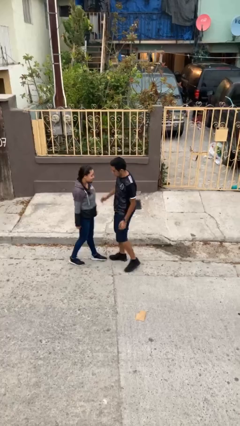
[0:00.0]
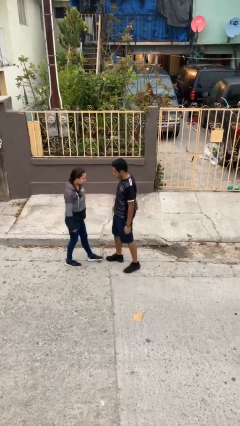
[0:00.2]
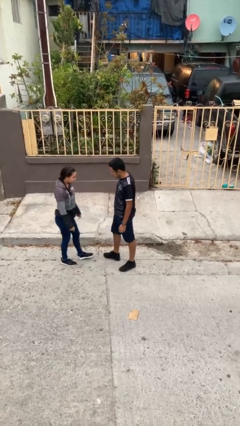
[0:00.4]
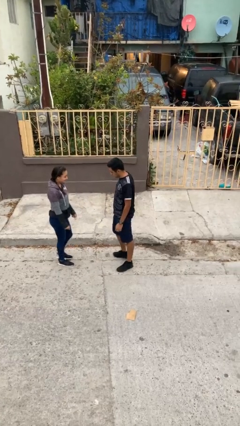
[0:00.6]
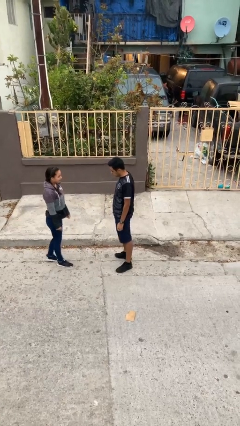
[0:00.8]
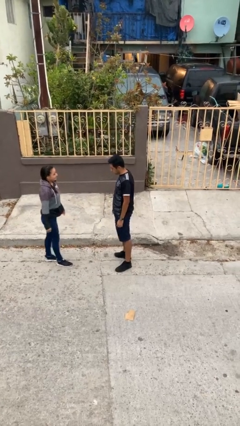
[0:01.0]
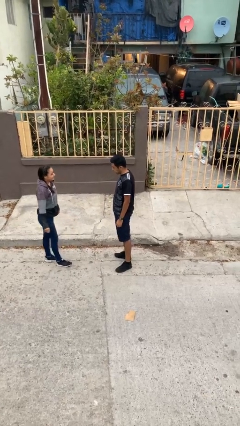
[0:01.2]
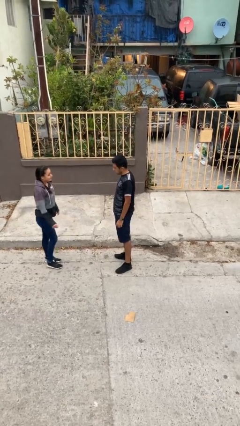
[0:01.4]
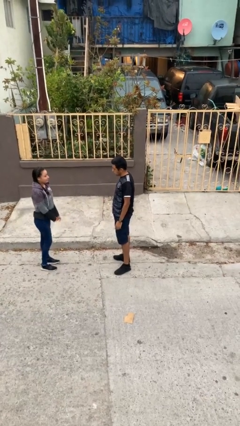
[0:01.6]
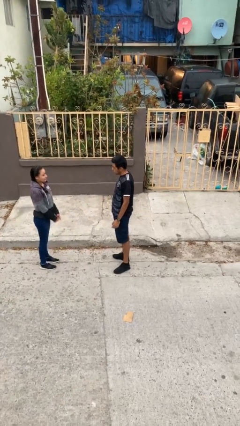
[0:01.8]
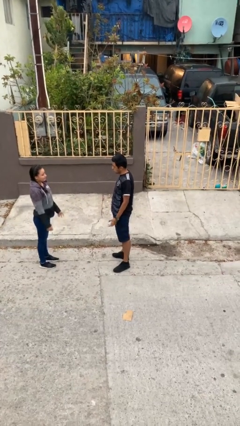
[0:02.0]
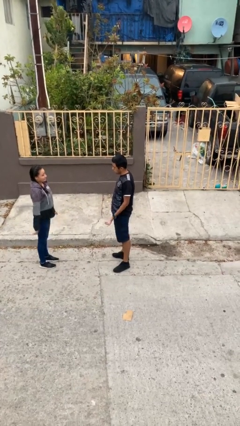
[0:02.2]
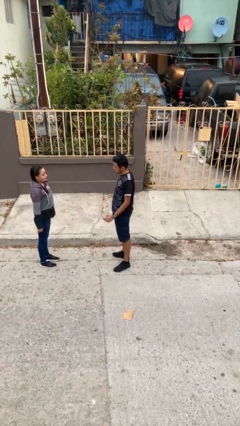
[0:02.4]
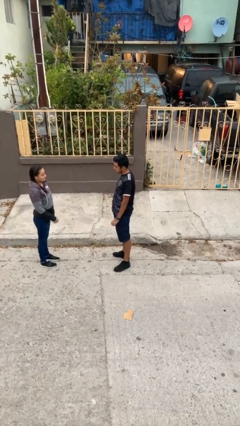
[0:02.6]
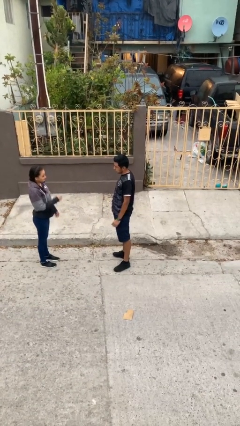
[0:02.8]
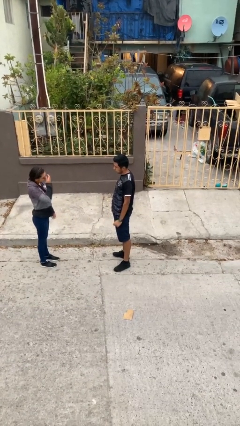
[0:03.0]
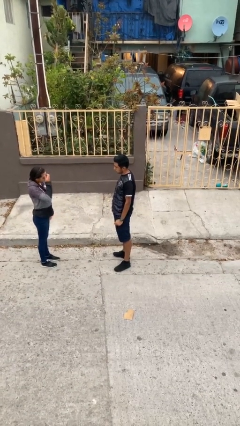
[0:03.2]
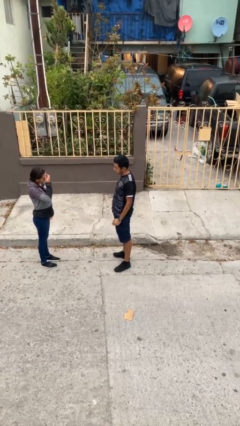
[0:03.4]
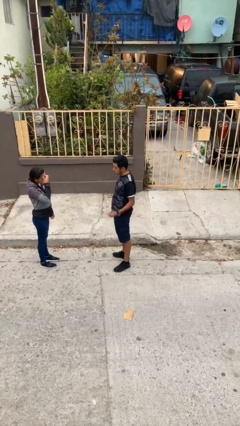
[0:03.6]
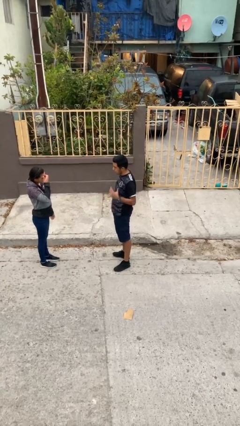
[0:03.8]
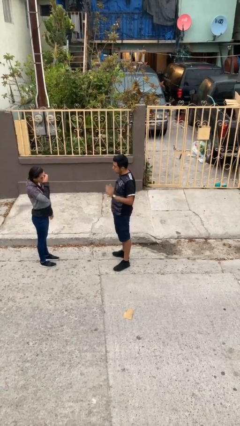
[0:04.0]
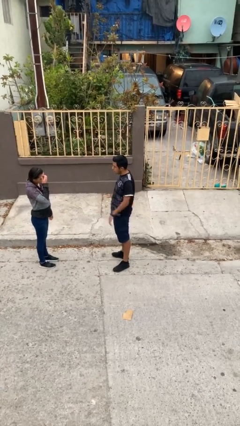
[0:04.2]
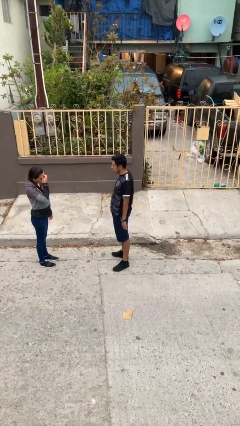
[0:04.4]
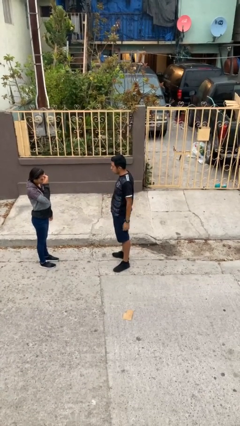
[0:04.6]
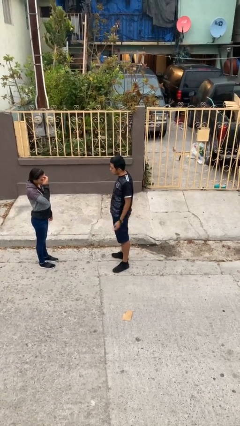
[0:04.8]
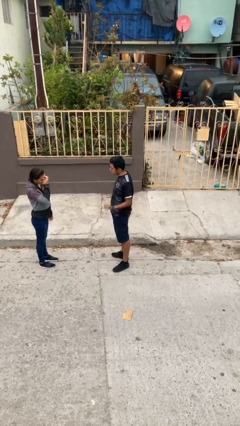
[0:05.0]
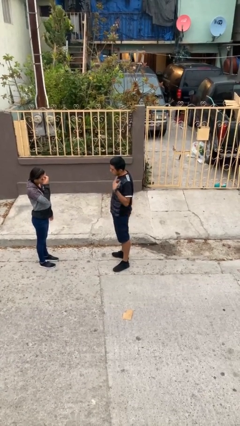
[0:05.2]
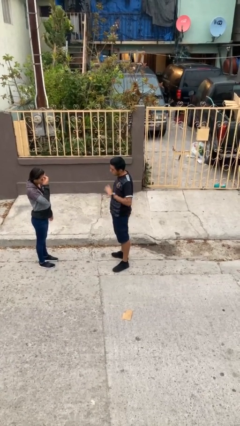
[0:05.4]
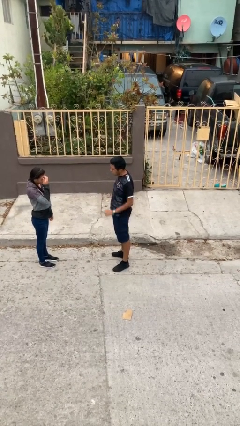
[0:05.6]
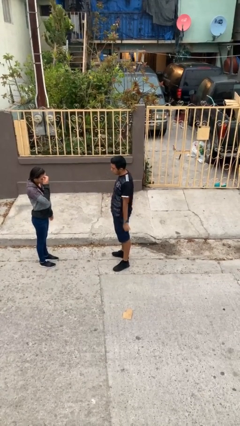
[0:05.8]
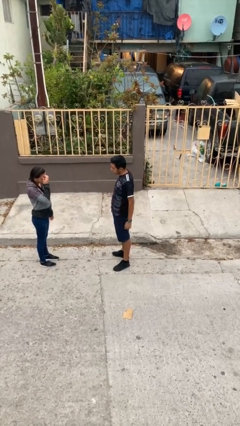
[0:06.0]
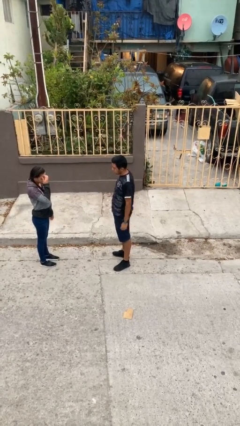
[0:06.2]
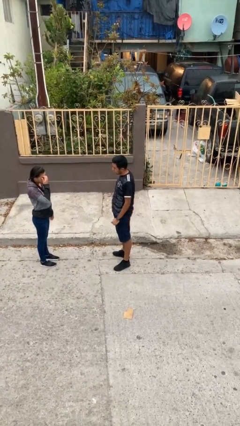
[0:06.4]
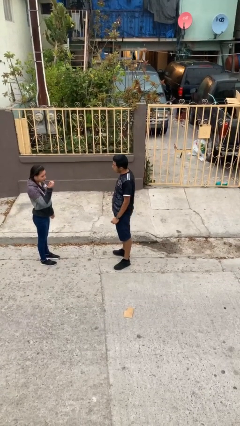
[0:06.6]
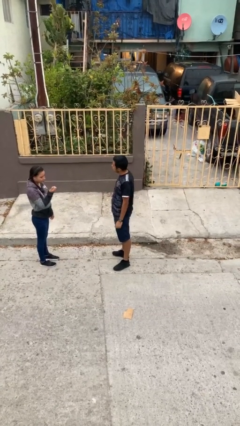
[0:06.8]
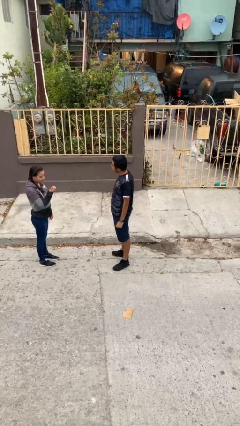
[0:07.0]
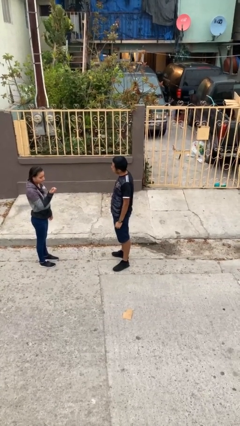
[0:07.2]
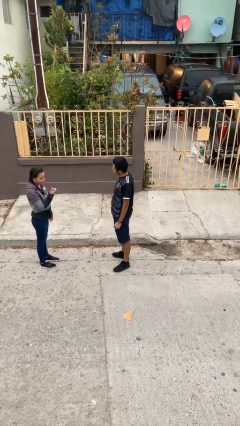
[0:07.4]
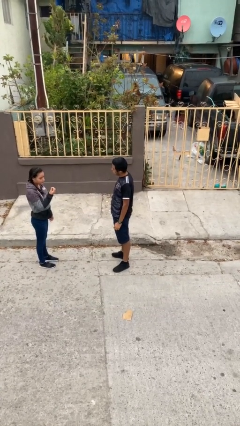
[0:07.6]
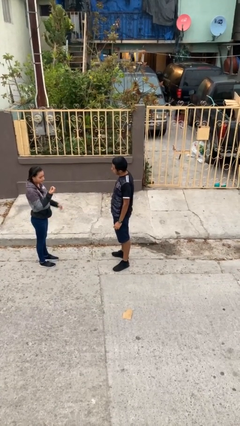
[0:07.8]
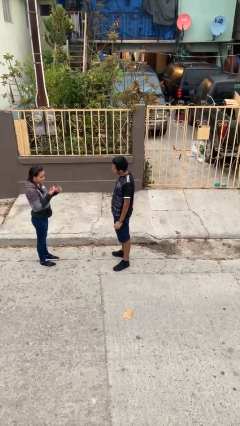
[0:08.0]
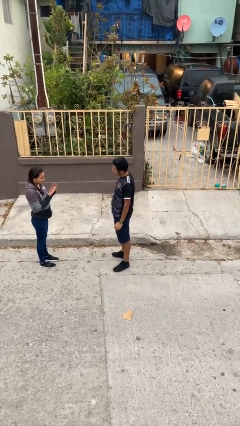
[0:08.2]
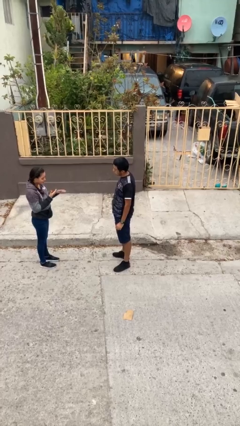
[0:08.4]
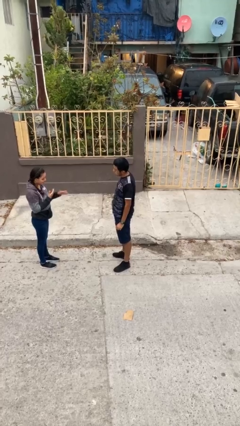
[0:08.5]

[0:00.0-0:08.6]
person talks to person

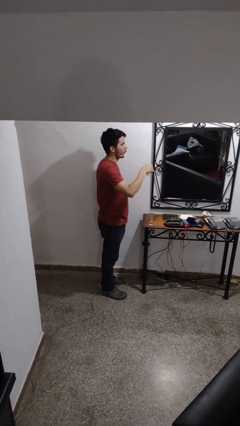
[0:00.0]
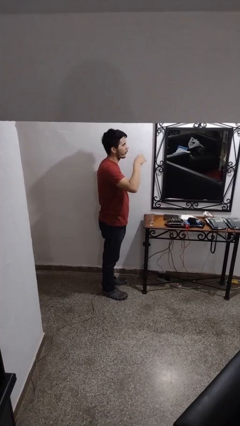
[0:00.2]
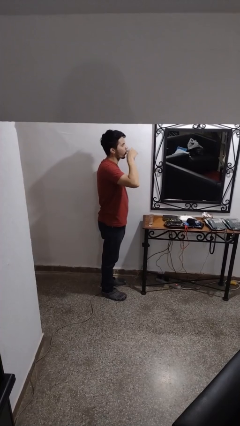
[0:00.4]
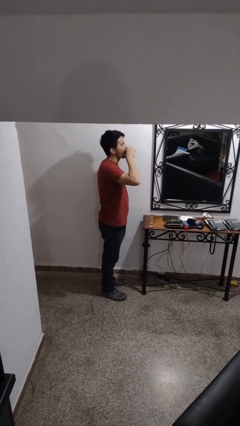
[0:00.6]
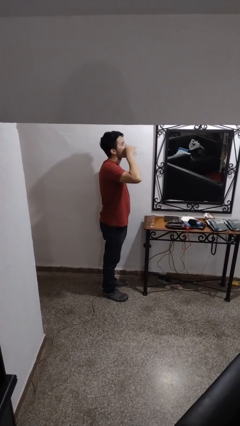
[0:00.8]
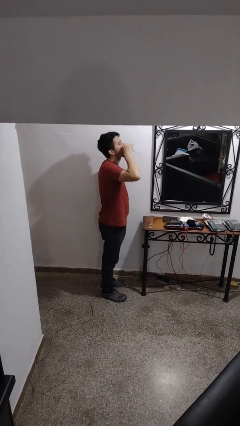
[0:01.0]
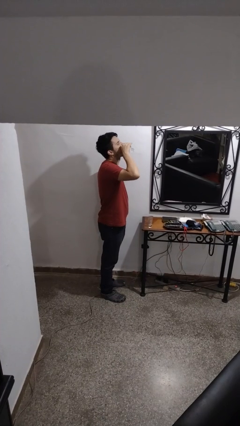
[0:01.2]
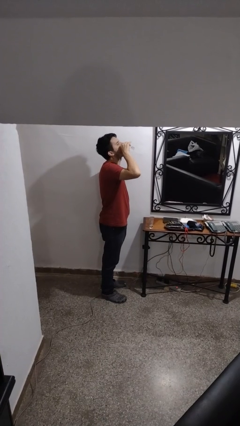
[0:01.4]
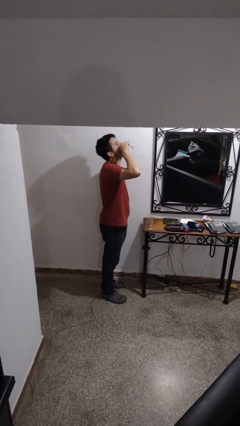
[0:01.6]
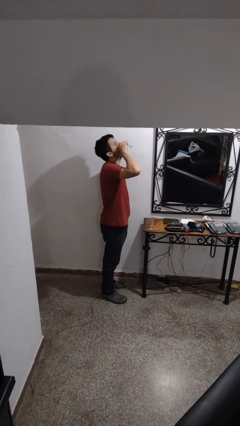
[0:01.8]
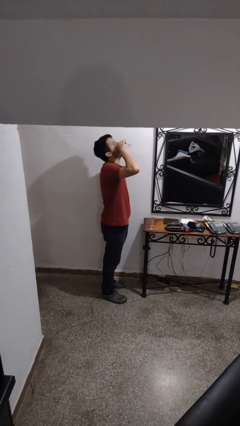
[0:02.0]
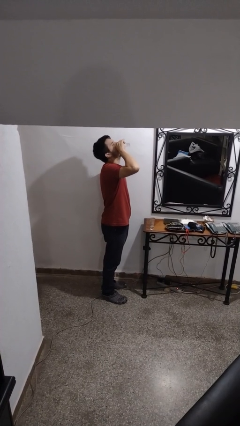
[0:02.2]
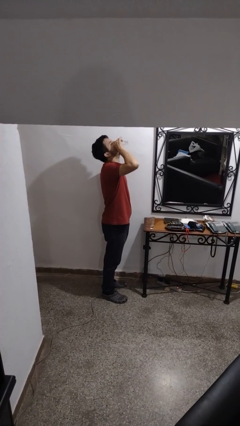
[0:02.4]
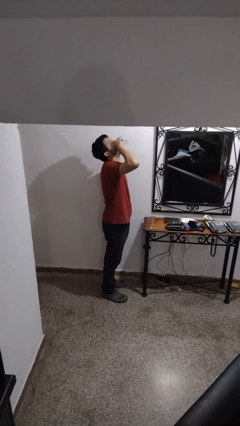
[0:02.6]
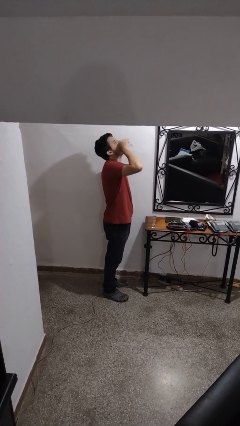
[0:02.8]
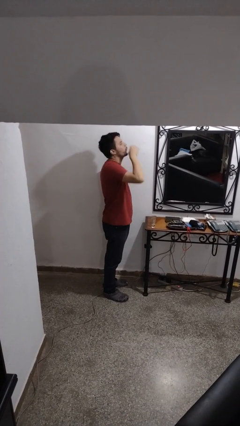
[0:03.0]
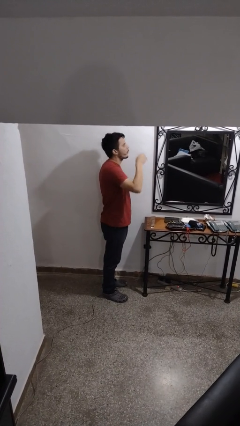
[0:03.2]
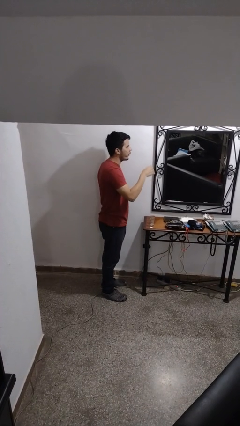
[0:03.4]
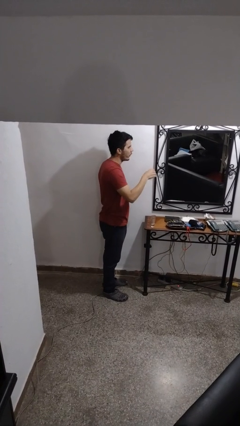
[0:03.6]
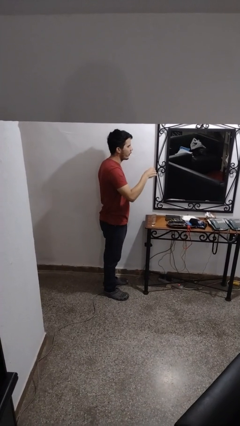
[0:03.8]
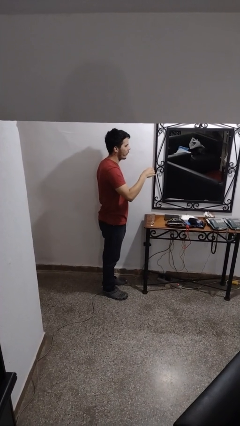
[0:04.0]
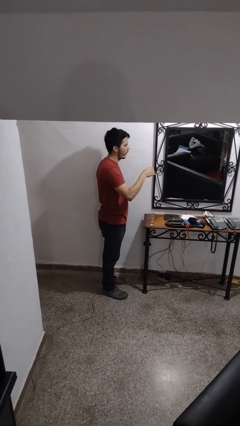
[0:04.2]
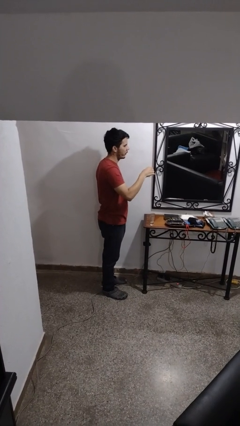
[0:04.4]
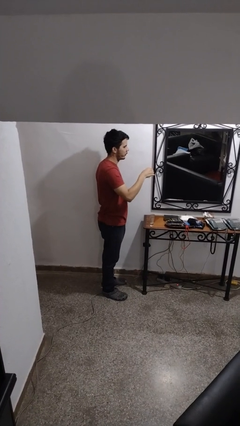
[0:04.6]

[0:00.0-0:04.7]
person drinks from shotglass

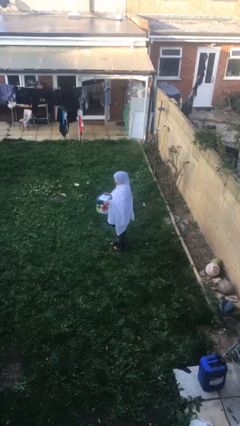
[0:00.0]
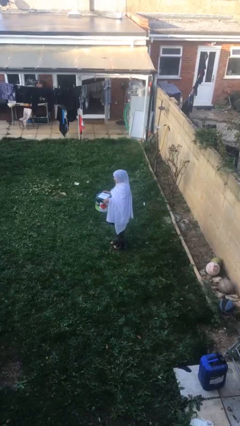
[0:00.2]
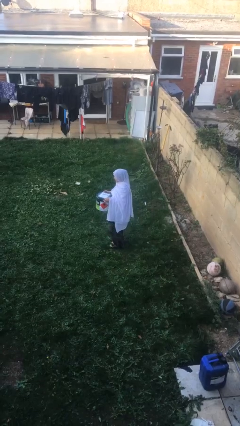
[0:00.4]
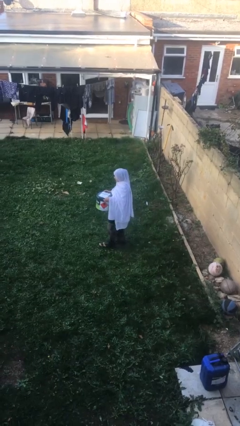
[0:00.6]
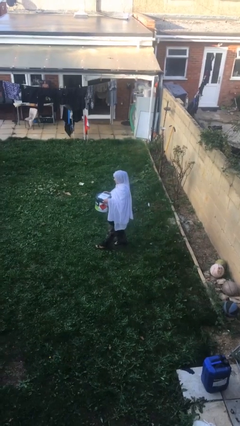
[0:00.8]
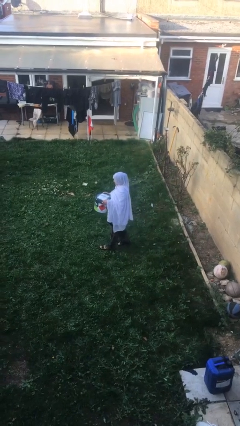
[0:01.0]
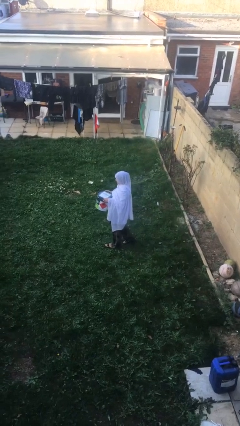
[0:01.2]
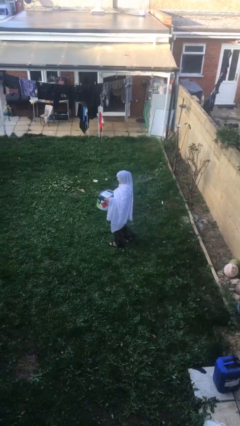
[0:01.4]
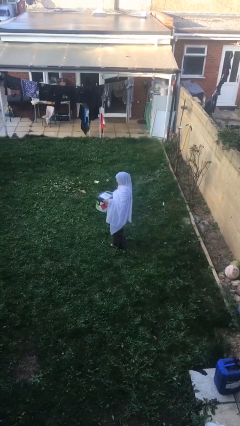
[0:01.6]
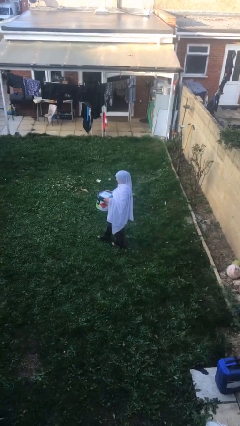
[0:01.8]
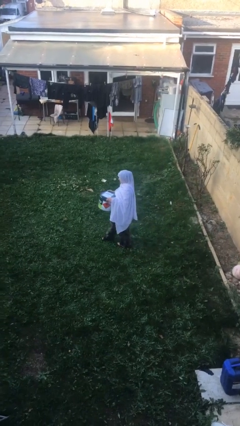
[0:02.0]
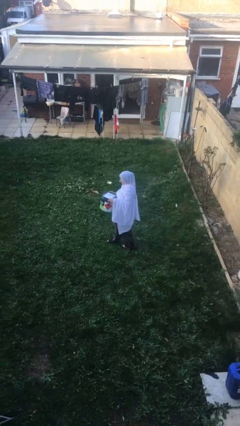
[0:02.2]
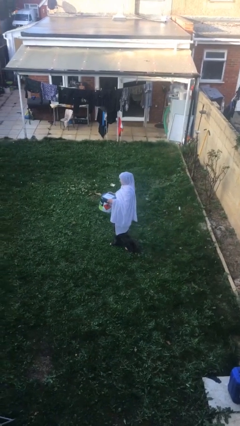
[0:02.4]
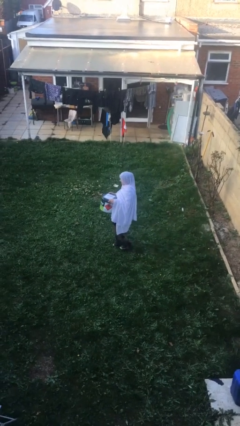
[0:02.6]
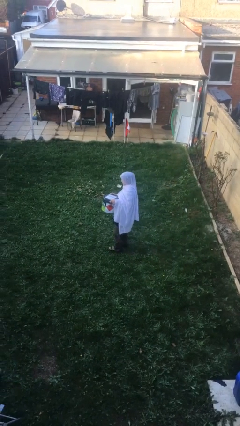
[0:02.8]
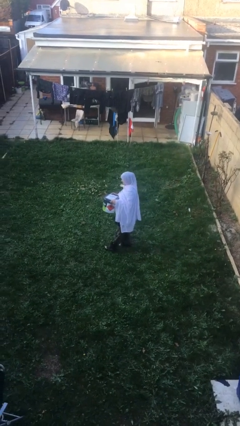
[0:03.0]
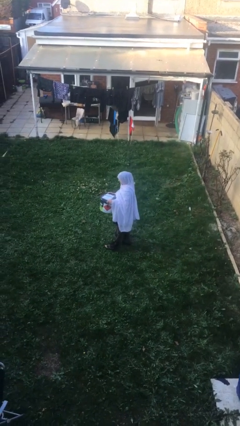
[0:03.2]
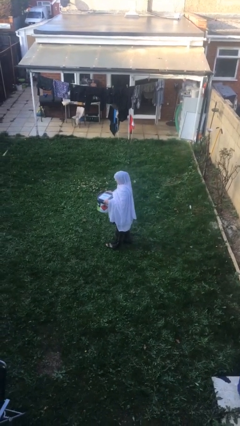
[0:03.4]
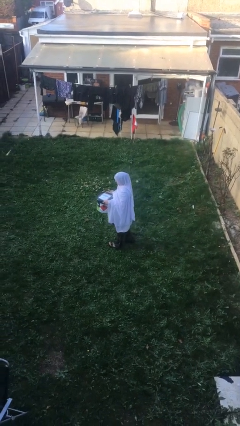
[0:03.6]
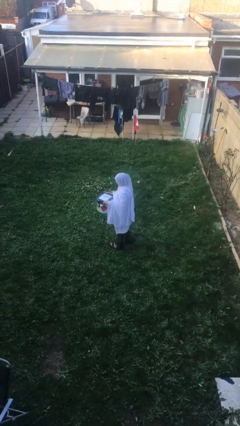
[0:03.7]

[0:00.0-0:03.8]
person carries heavy object

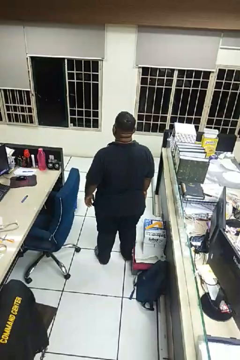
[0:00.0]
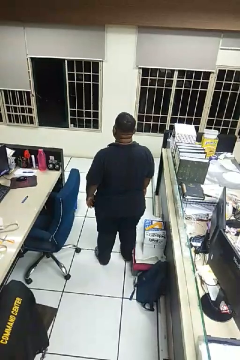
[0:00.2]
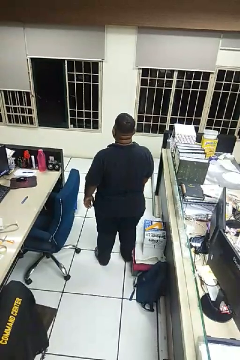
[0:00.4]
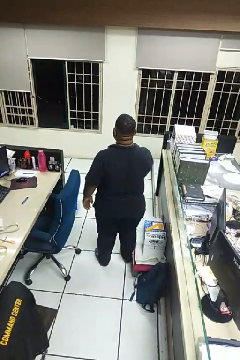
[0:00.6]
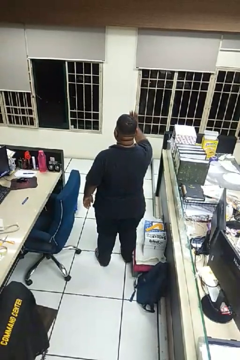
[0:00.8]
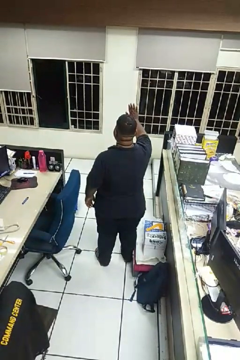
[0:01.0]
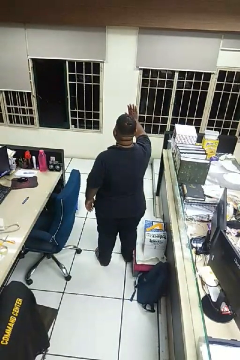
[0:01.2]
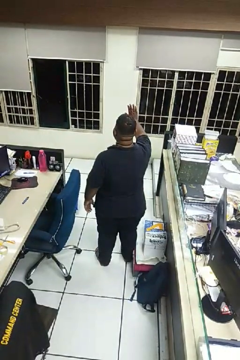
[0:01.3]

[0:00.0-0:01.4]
person gestures stop
